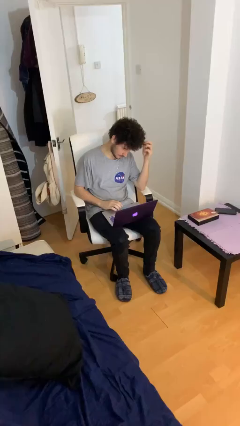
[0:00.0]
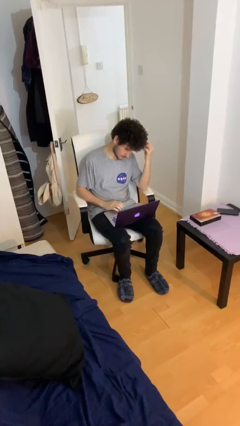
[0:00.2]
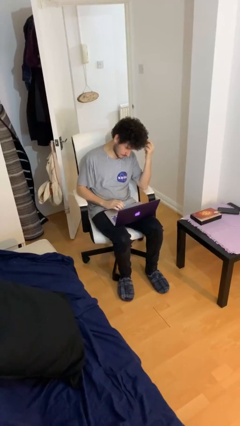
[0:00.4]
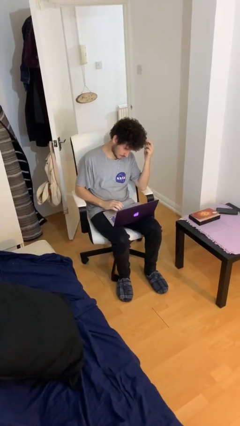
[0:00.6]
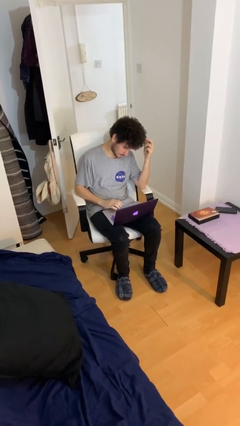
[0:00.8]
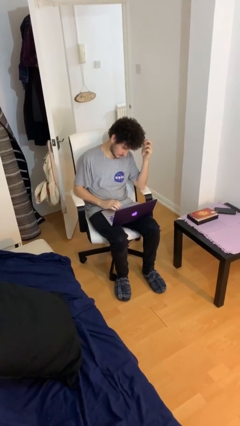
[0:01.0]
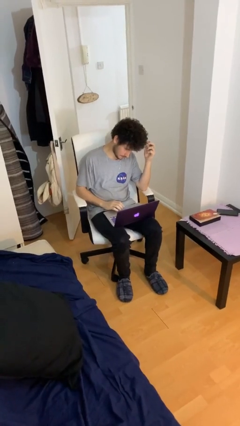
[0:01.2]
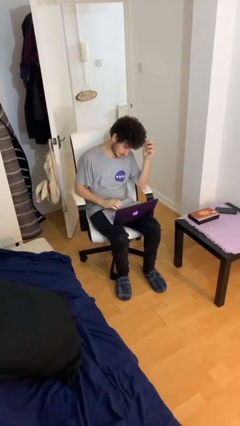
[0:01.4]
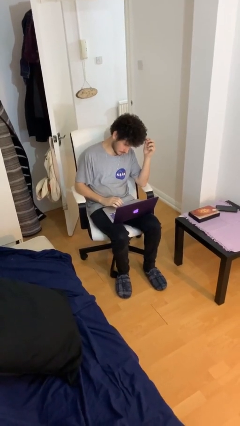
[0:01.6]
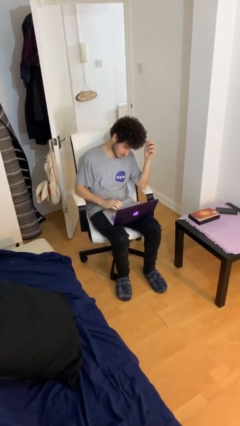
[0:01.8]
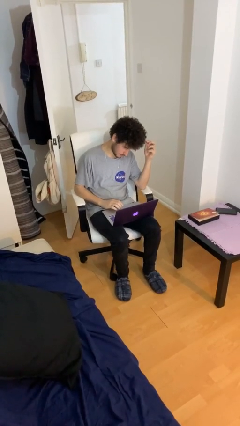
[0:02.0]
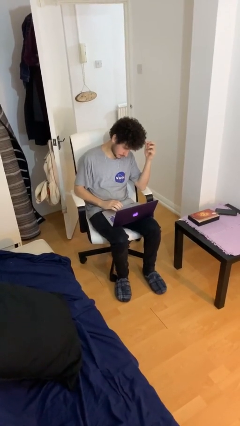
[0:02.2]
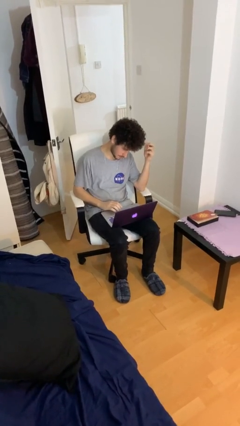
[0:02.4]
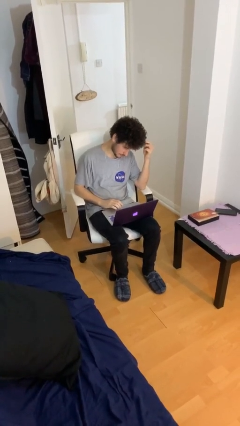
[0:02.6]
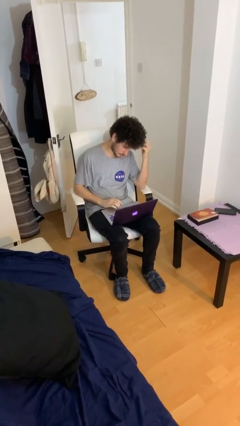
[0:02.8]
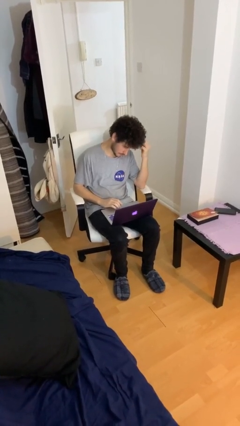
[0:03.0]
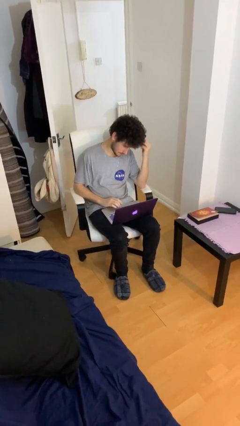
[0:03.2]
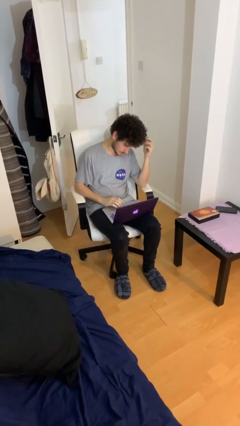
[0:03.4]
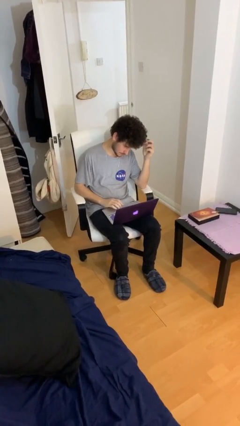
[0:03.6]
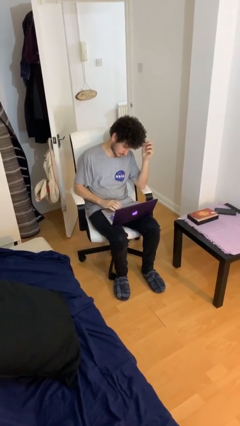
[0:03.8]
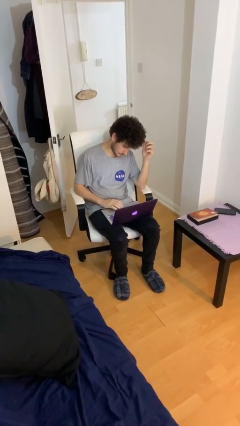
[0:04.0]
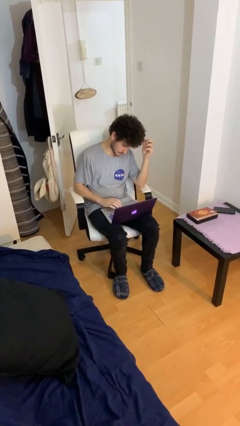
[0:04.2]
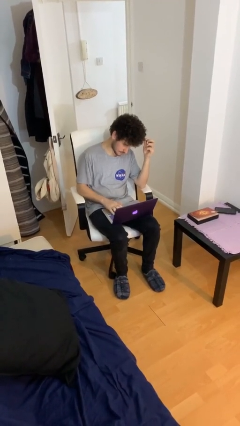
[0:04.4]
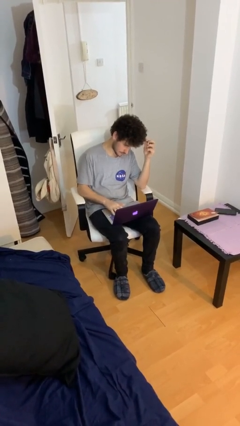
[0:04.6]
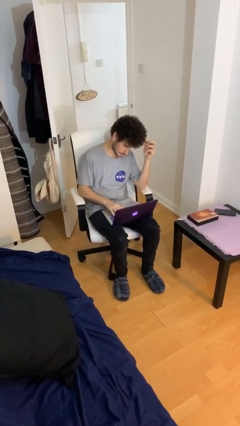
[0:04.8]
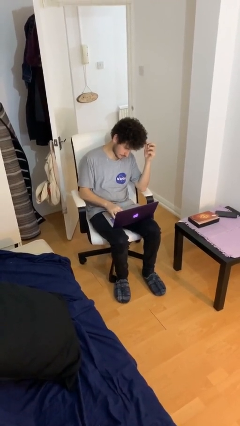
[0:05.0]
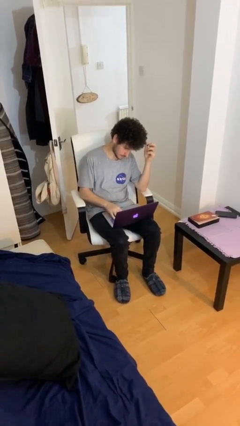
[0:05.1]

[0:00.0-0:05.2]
person interacts with laptop

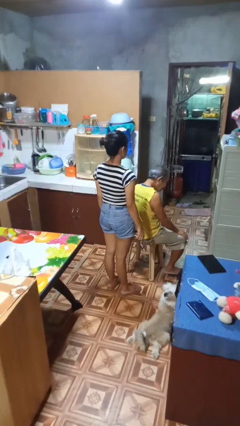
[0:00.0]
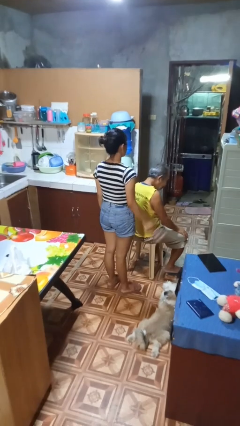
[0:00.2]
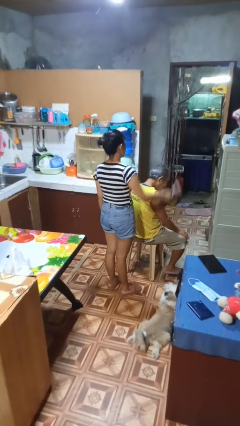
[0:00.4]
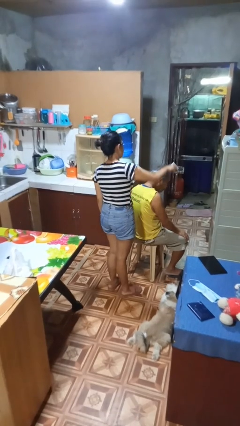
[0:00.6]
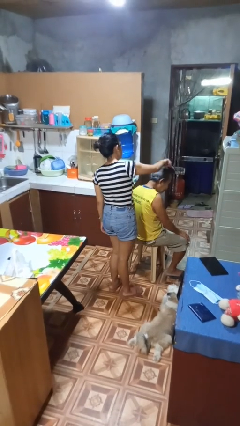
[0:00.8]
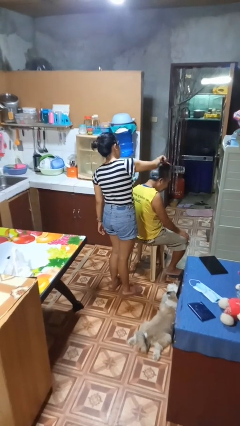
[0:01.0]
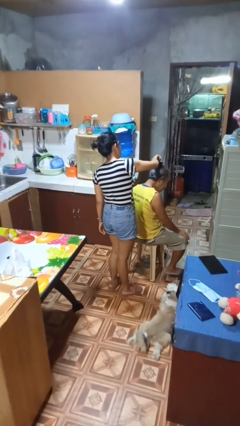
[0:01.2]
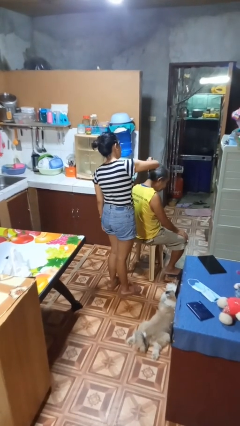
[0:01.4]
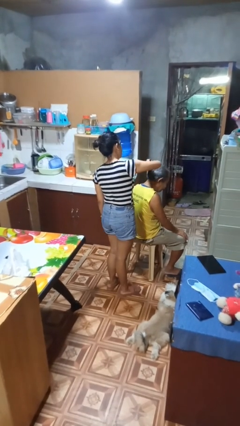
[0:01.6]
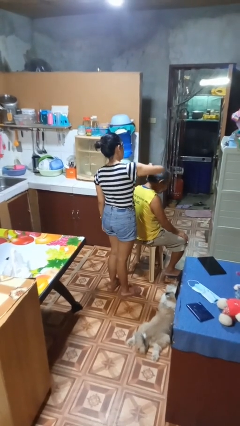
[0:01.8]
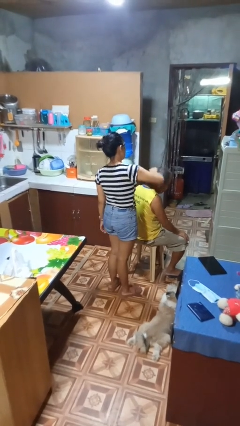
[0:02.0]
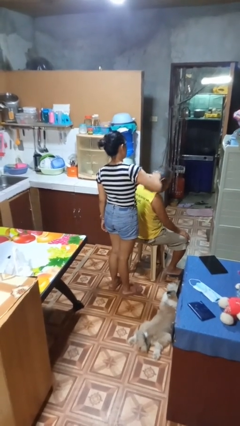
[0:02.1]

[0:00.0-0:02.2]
person brushes hair of person

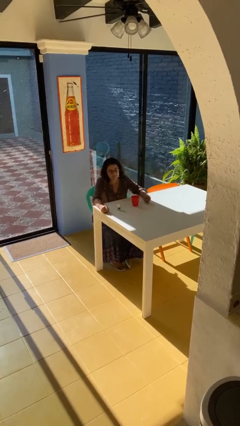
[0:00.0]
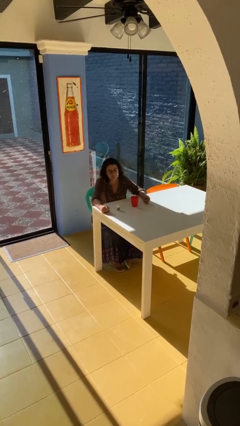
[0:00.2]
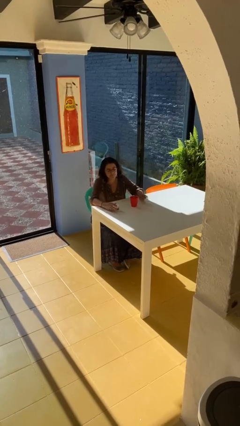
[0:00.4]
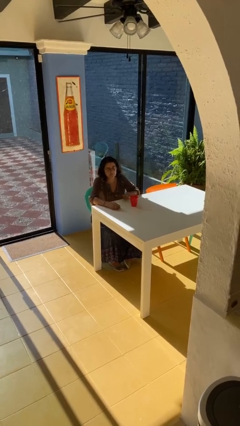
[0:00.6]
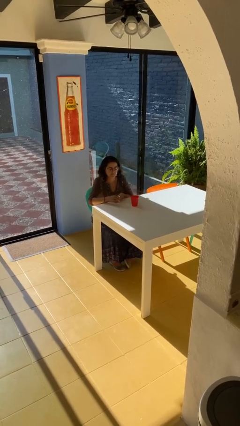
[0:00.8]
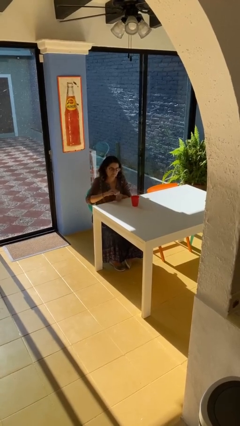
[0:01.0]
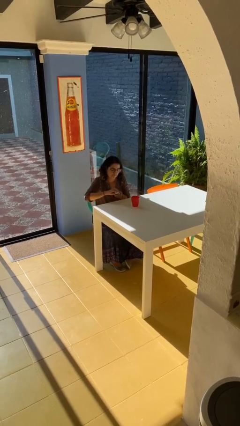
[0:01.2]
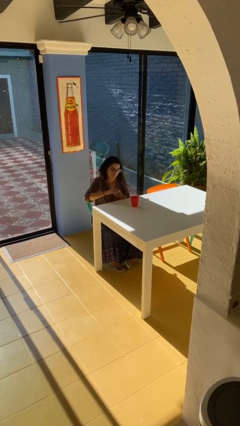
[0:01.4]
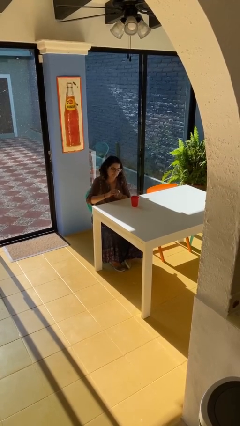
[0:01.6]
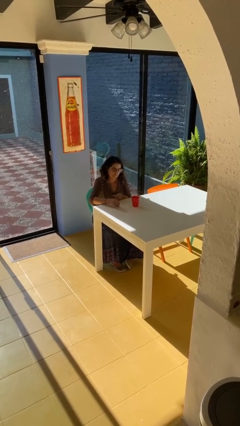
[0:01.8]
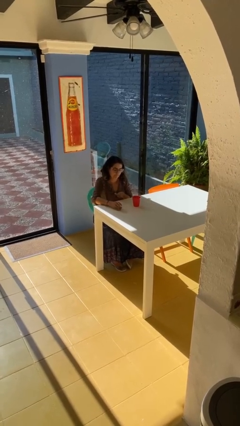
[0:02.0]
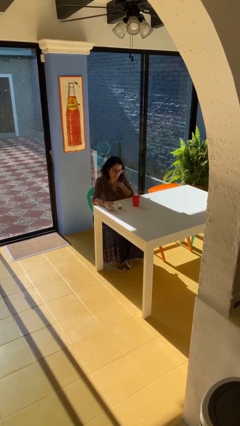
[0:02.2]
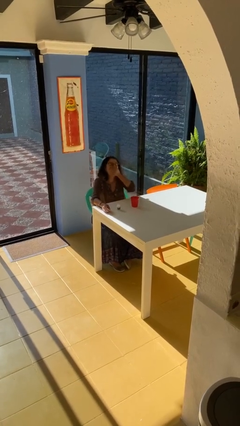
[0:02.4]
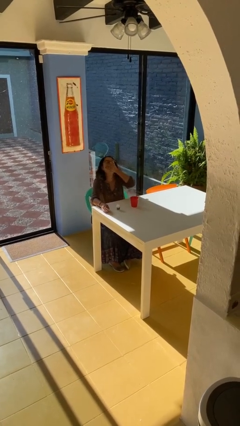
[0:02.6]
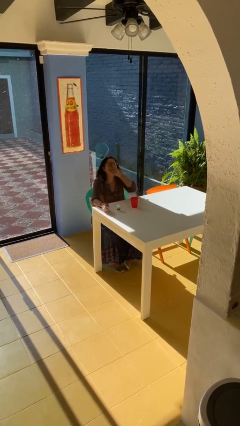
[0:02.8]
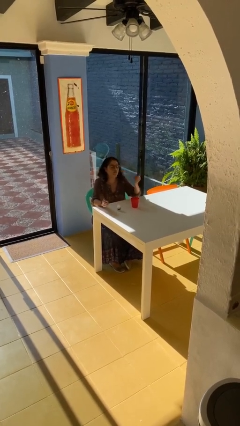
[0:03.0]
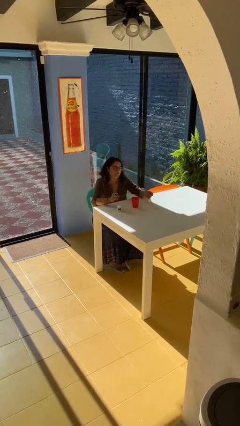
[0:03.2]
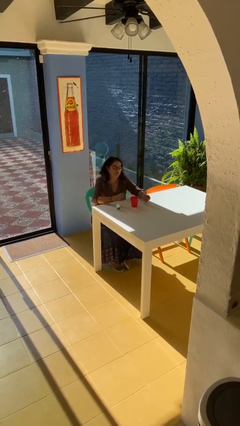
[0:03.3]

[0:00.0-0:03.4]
person takes medicine pills

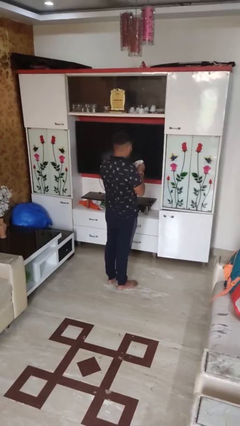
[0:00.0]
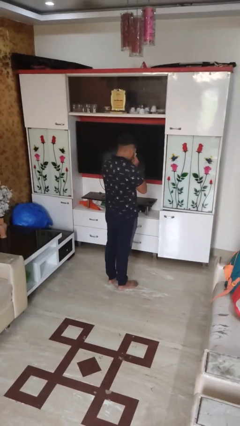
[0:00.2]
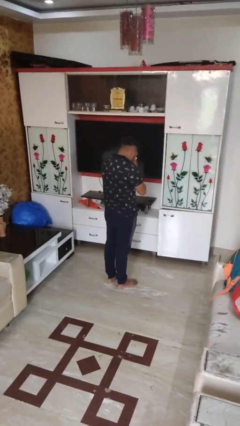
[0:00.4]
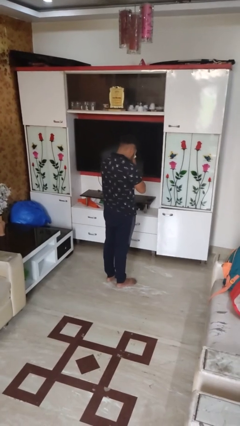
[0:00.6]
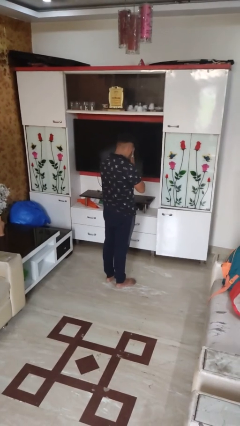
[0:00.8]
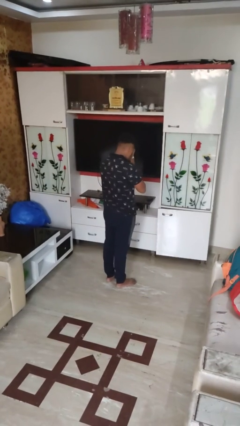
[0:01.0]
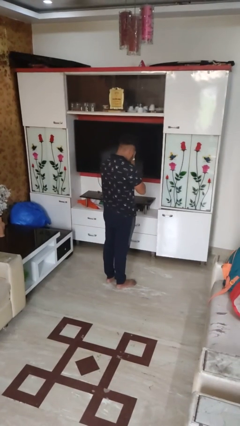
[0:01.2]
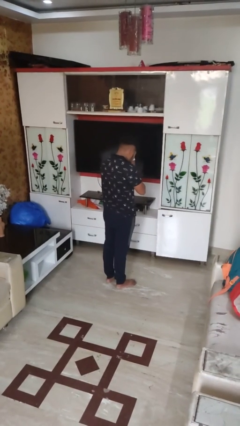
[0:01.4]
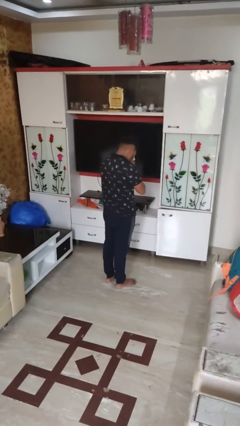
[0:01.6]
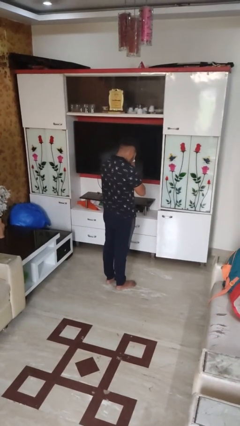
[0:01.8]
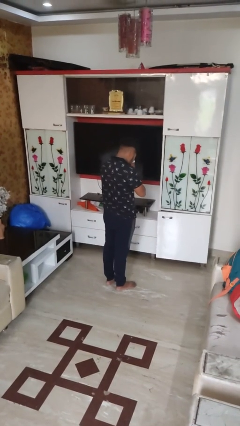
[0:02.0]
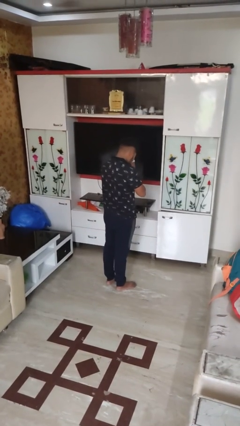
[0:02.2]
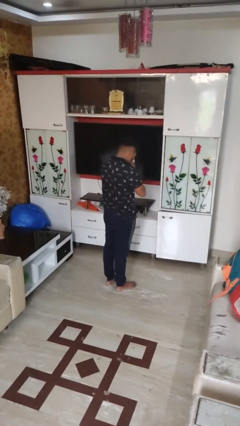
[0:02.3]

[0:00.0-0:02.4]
person blows nose

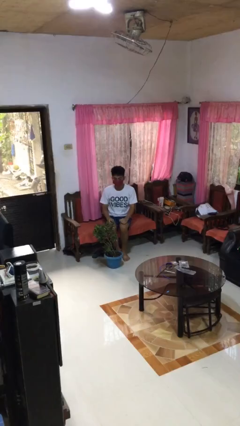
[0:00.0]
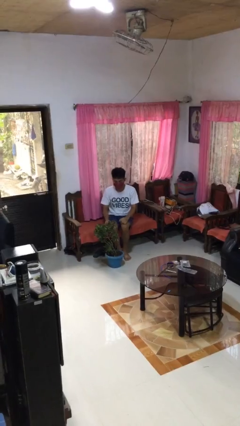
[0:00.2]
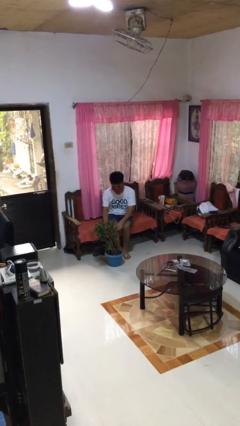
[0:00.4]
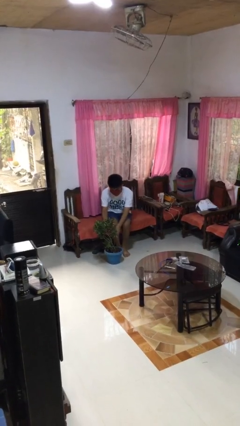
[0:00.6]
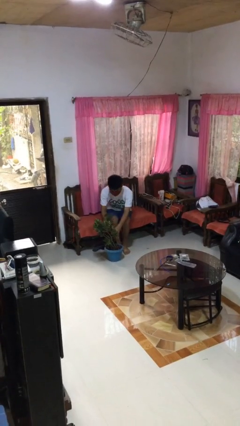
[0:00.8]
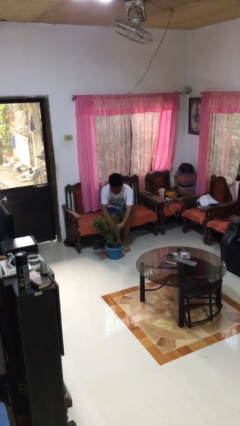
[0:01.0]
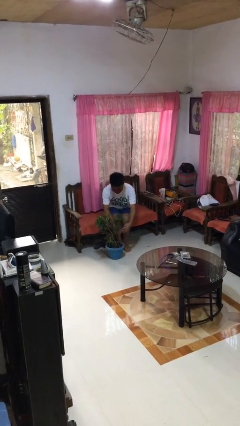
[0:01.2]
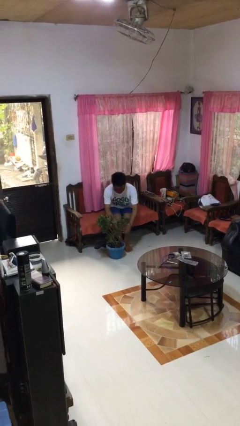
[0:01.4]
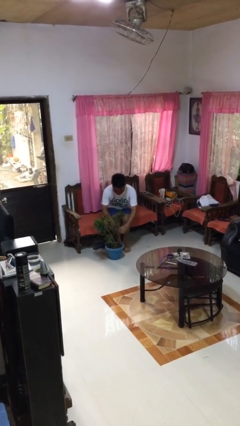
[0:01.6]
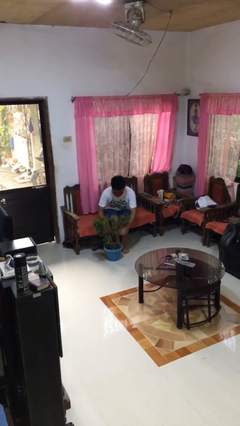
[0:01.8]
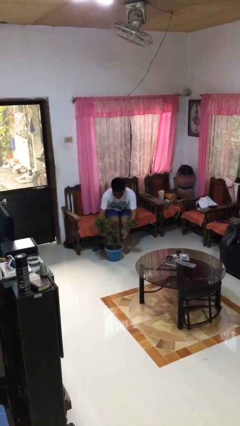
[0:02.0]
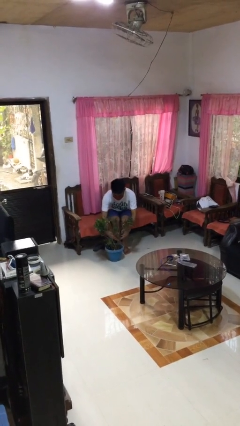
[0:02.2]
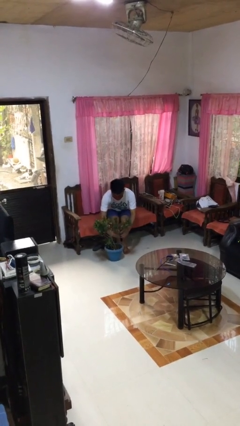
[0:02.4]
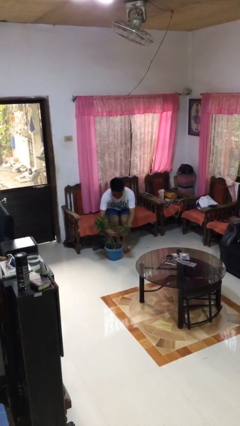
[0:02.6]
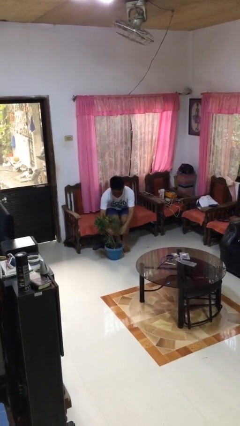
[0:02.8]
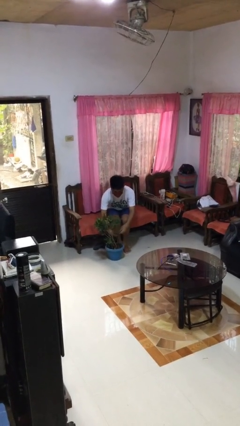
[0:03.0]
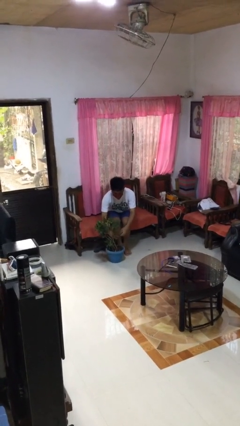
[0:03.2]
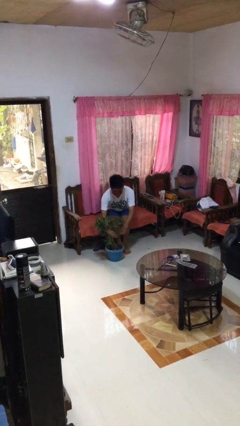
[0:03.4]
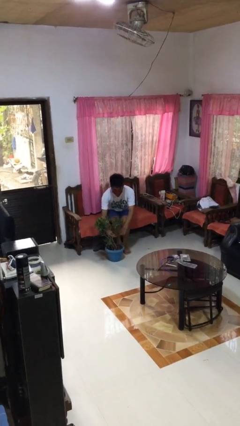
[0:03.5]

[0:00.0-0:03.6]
person arranges flowers in vase

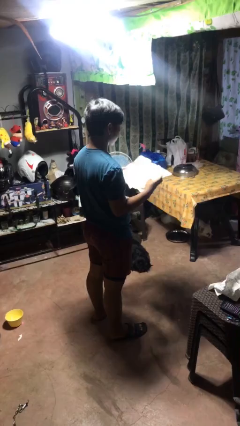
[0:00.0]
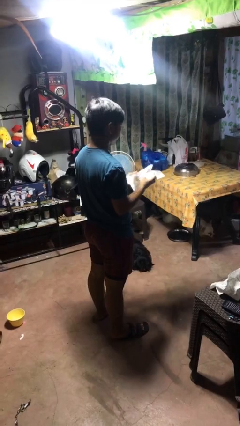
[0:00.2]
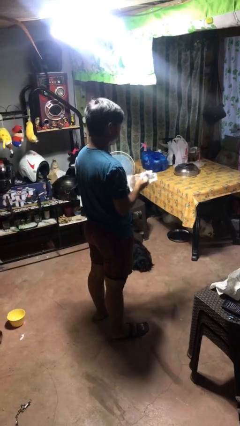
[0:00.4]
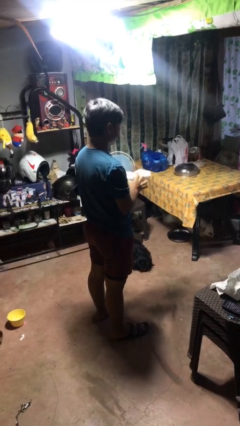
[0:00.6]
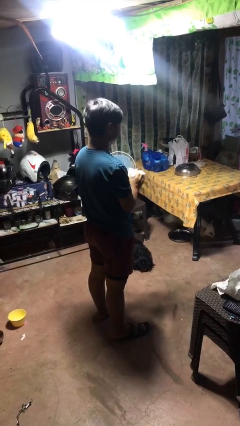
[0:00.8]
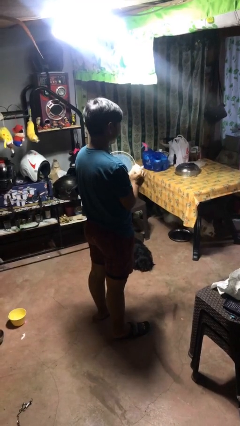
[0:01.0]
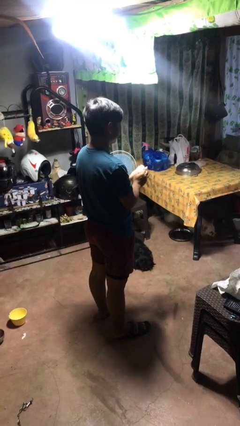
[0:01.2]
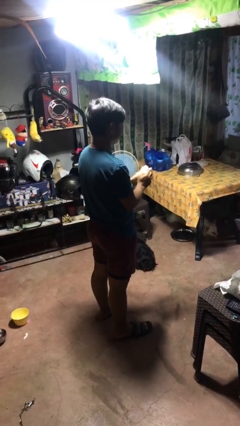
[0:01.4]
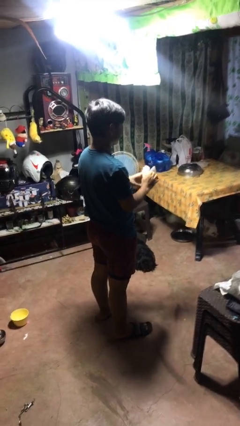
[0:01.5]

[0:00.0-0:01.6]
person crumples paper
